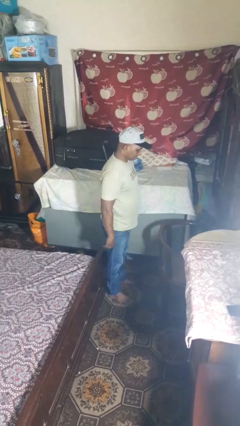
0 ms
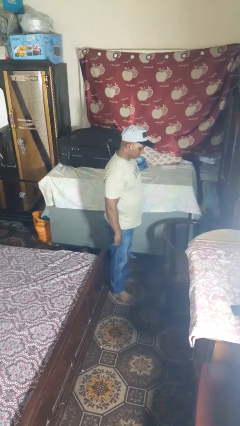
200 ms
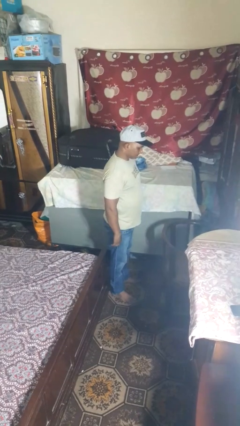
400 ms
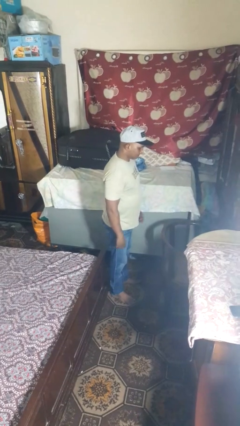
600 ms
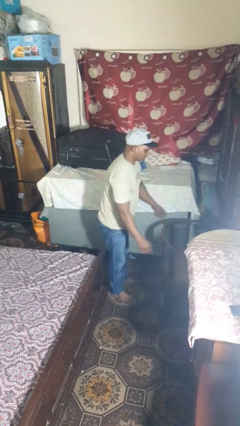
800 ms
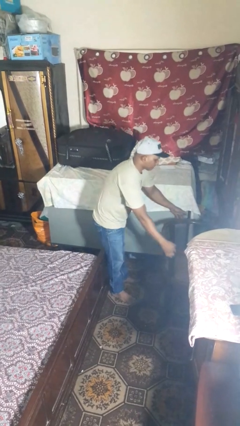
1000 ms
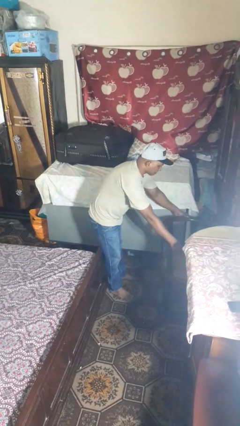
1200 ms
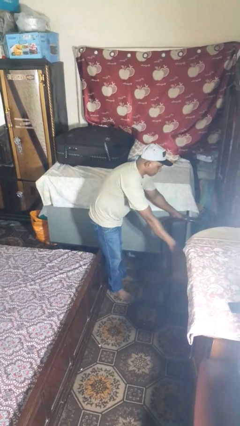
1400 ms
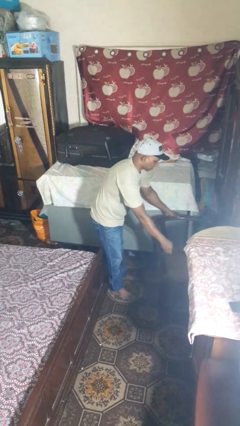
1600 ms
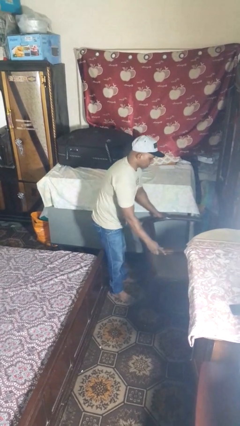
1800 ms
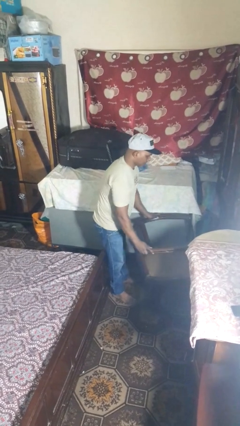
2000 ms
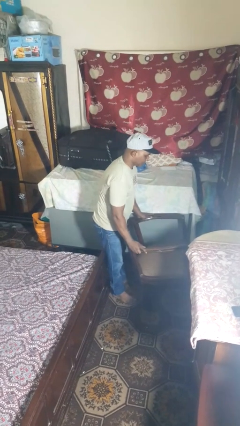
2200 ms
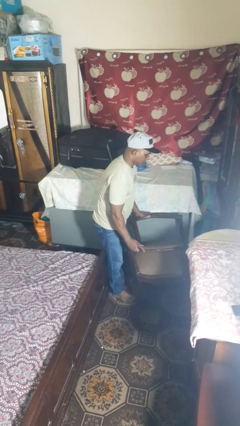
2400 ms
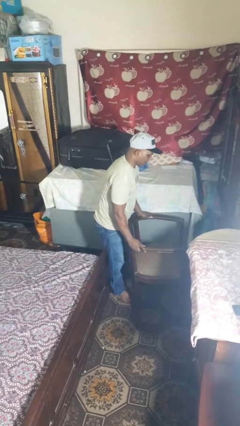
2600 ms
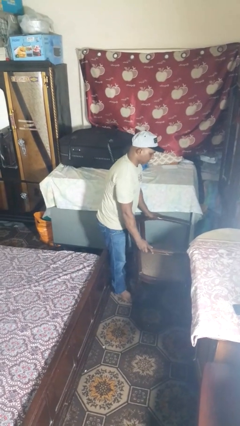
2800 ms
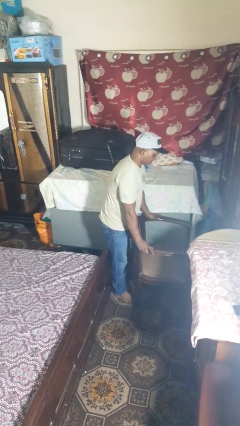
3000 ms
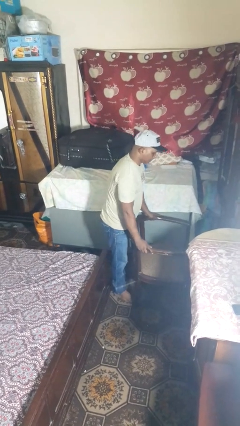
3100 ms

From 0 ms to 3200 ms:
person pulls out chair

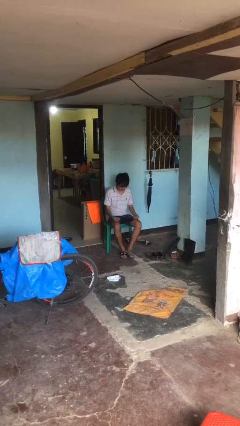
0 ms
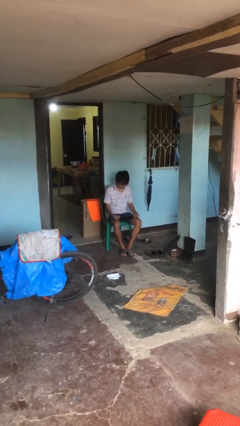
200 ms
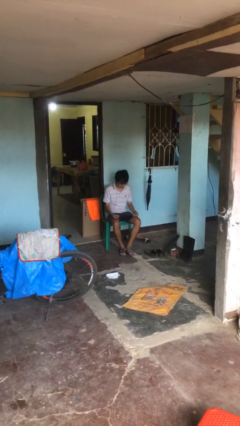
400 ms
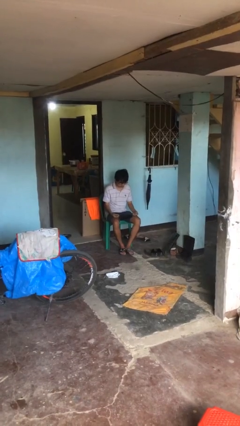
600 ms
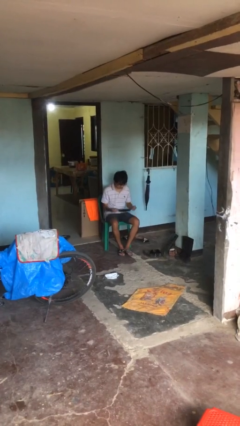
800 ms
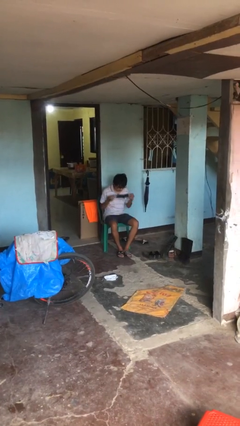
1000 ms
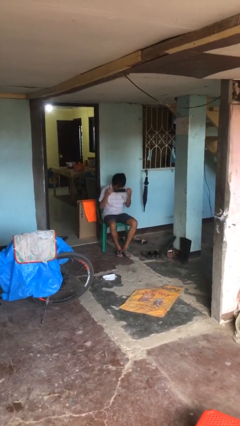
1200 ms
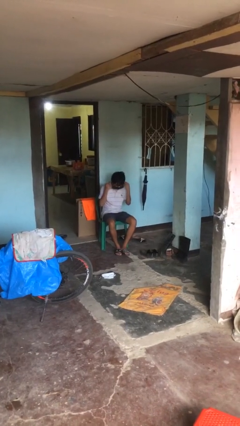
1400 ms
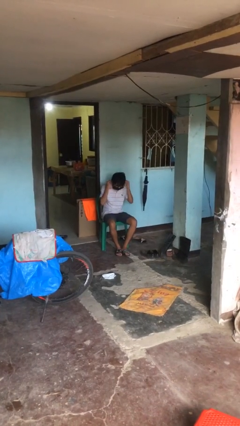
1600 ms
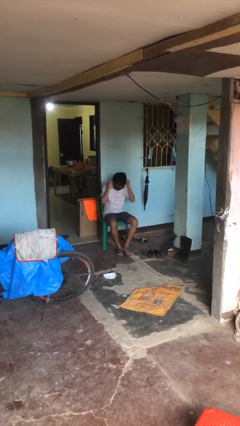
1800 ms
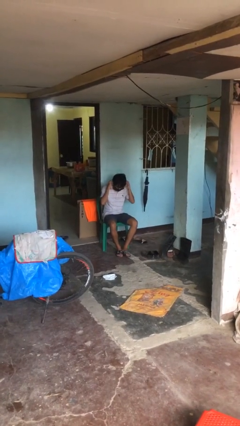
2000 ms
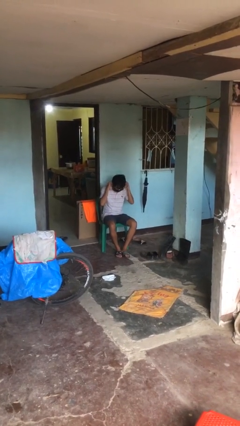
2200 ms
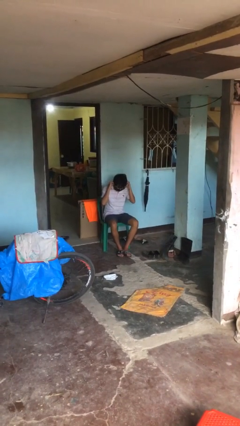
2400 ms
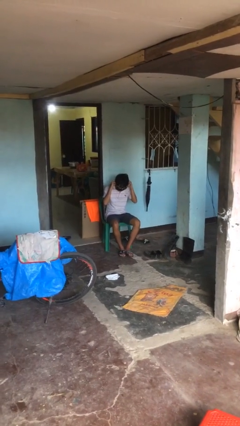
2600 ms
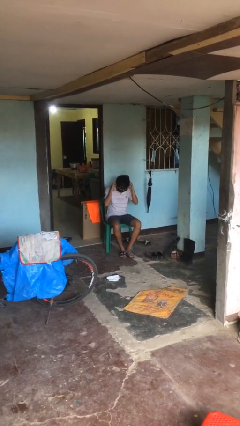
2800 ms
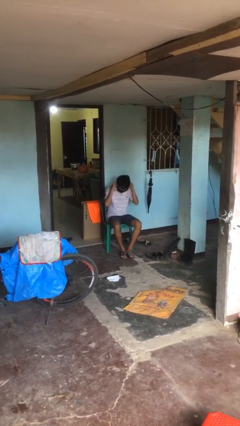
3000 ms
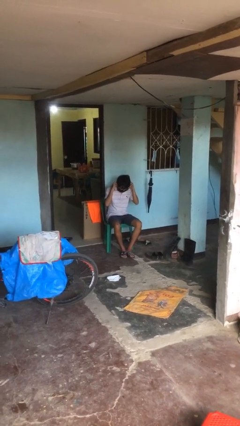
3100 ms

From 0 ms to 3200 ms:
person puts on facemask

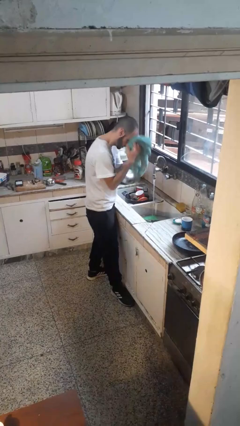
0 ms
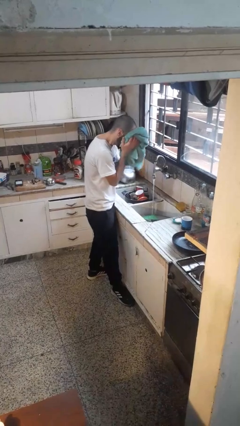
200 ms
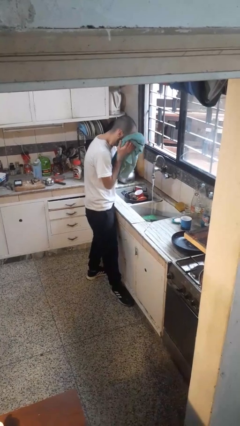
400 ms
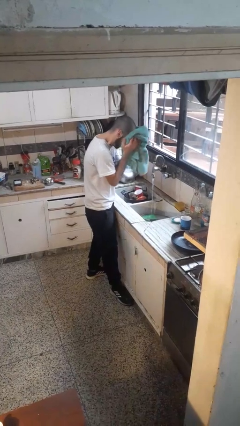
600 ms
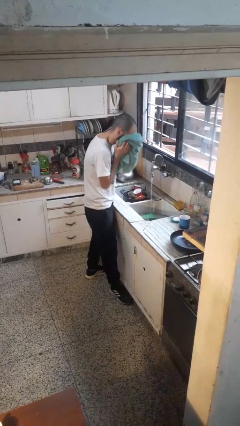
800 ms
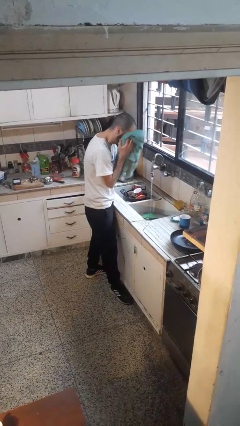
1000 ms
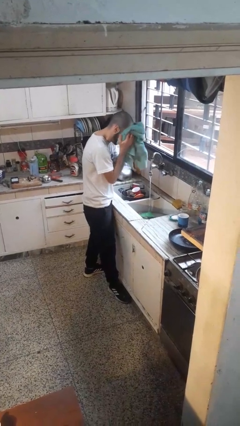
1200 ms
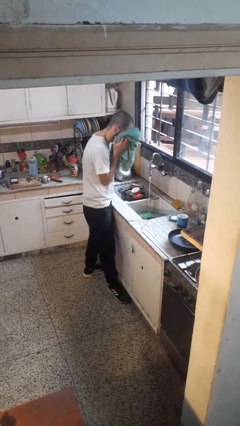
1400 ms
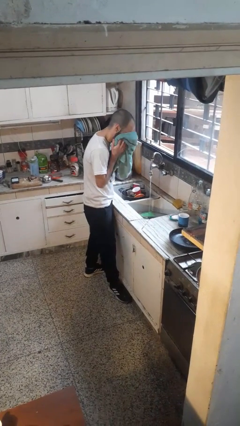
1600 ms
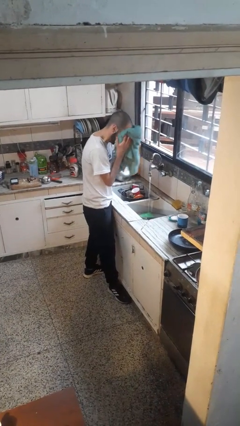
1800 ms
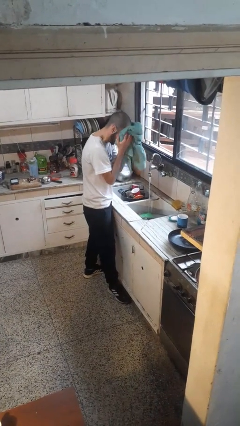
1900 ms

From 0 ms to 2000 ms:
person dries face with towel

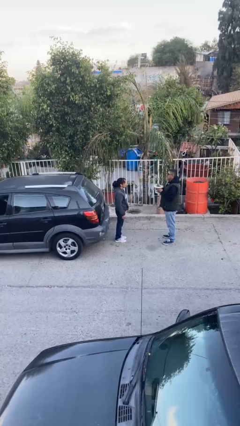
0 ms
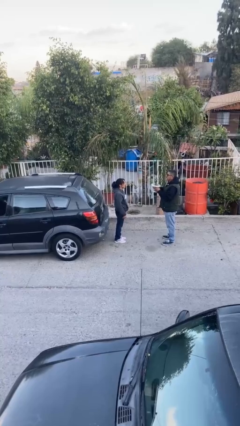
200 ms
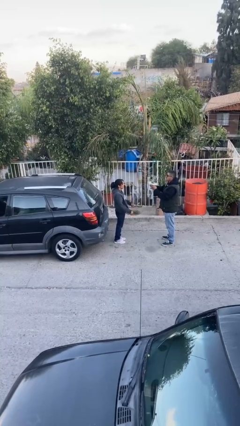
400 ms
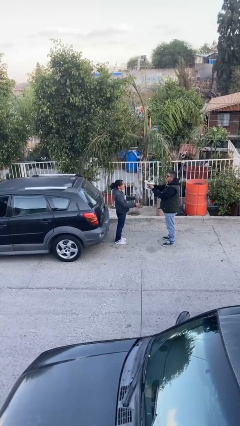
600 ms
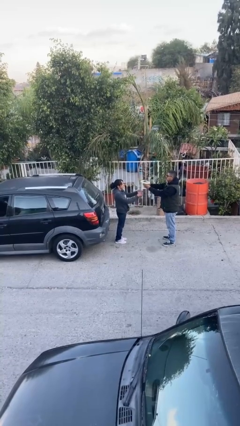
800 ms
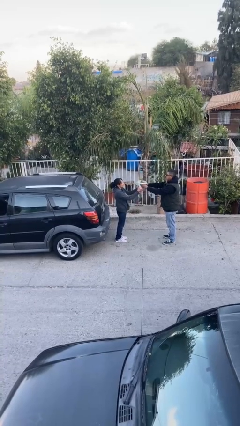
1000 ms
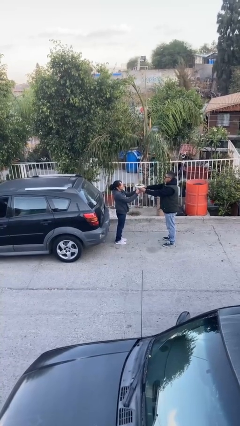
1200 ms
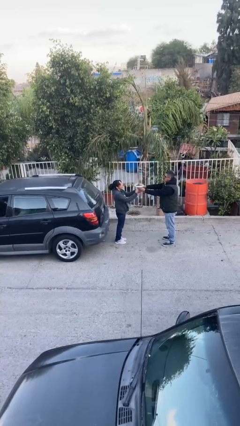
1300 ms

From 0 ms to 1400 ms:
person transfers object to person

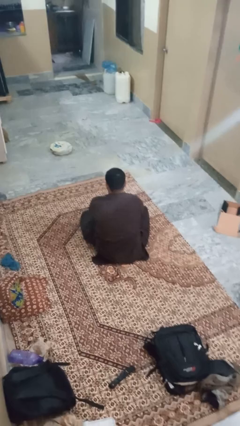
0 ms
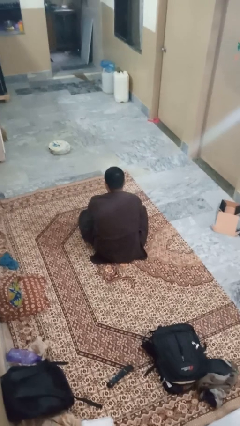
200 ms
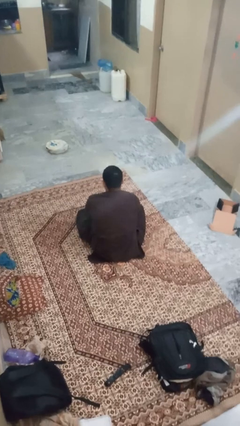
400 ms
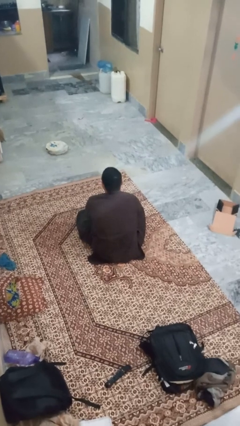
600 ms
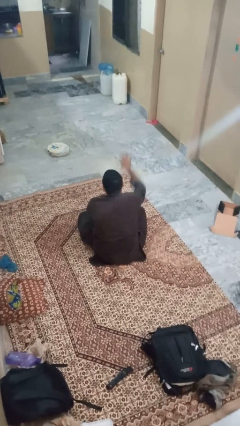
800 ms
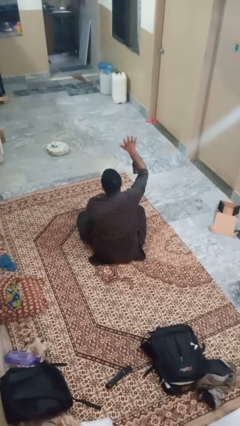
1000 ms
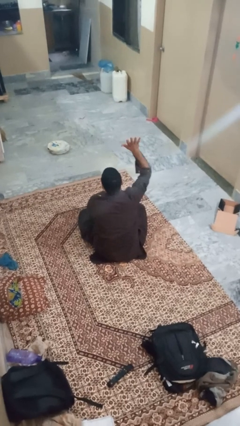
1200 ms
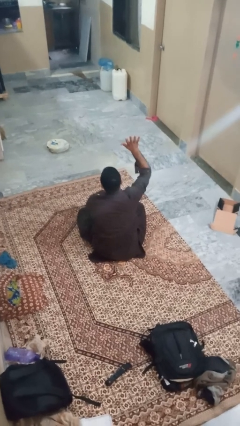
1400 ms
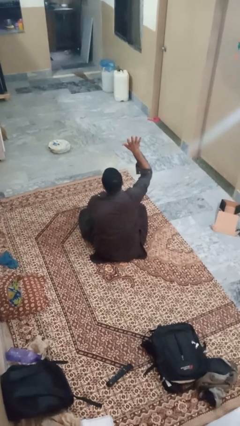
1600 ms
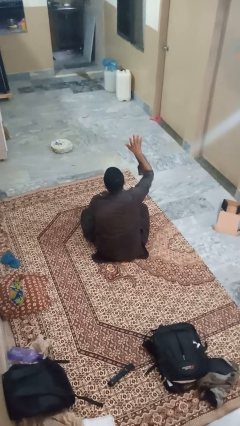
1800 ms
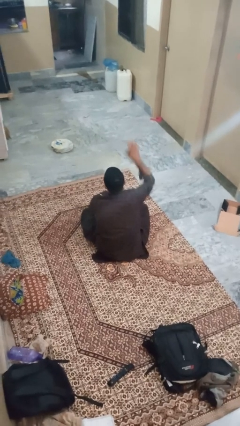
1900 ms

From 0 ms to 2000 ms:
person gestures number five

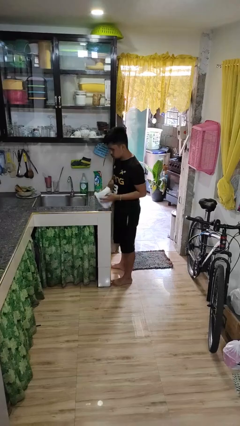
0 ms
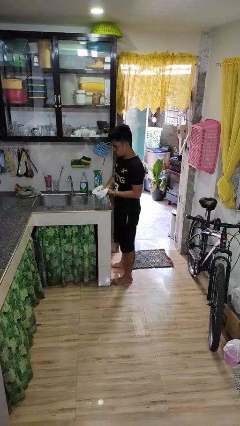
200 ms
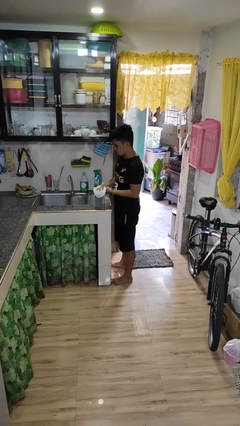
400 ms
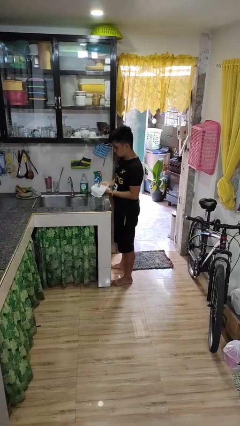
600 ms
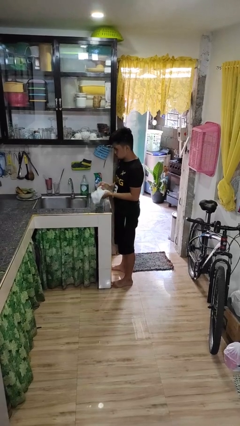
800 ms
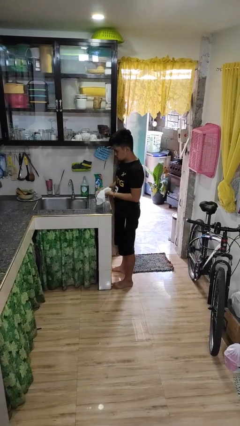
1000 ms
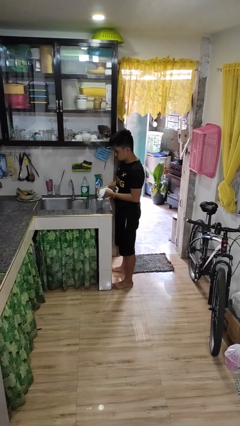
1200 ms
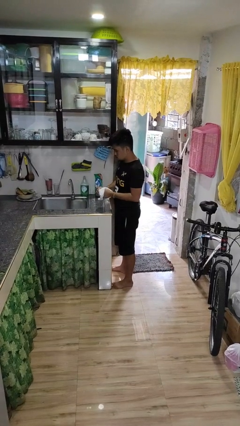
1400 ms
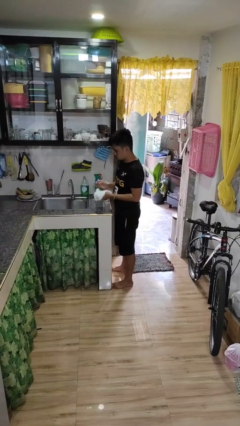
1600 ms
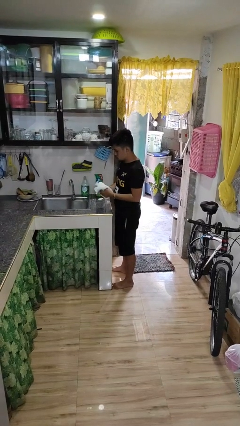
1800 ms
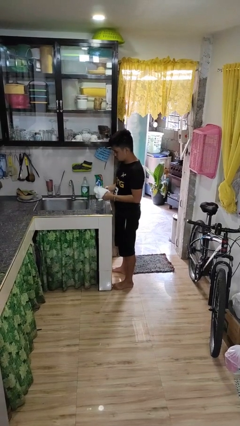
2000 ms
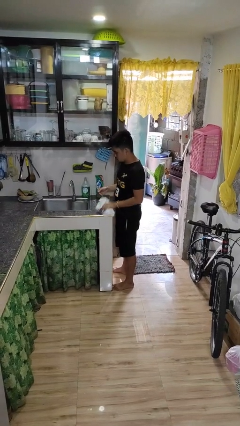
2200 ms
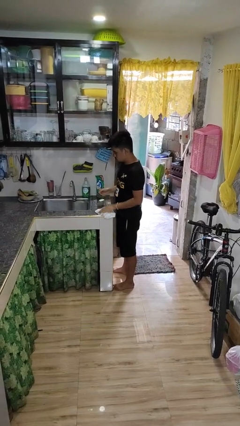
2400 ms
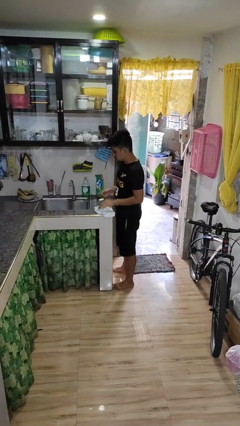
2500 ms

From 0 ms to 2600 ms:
person dries hands with towel

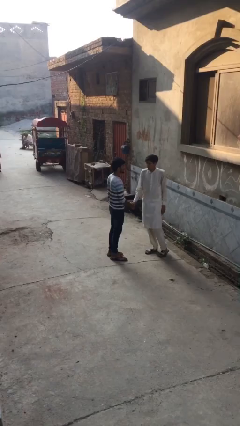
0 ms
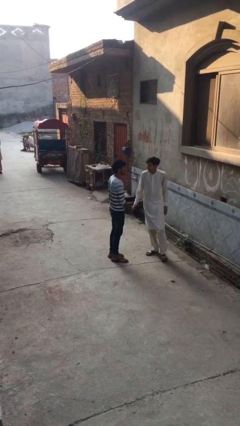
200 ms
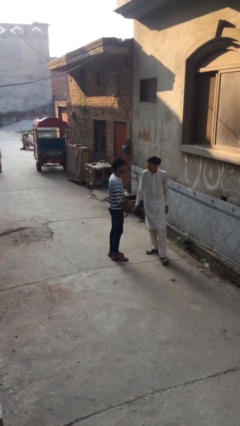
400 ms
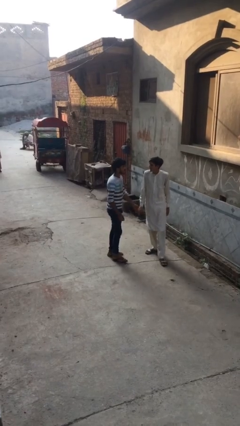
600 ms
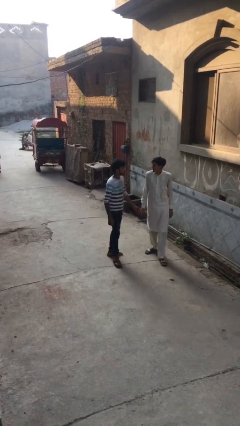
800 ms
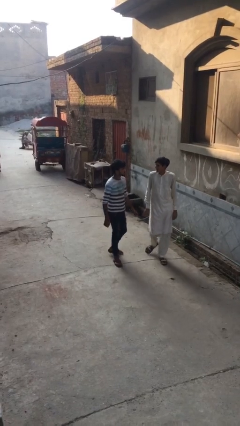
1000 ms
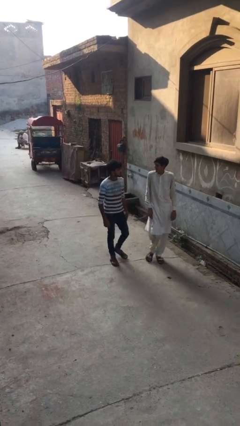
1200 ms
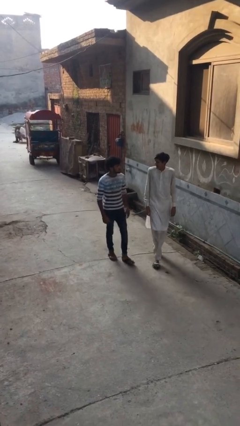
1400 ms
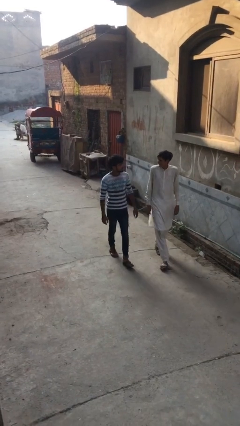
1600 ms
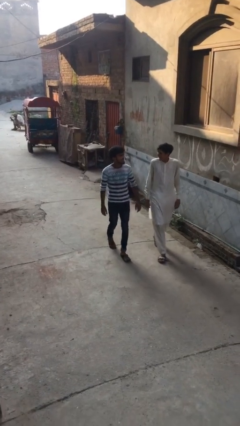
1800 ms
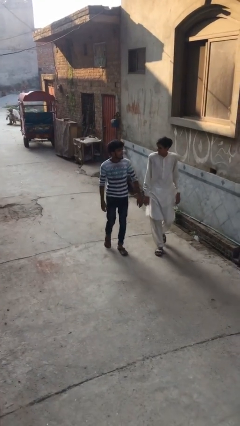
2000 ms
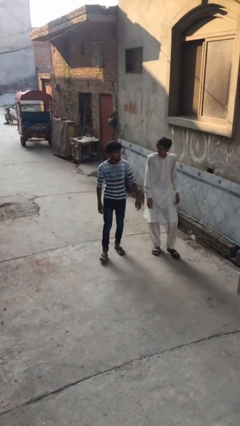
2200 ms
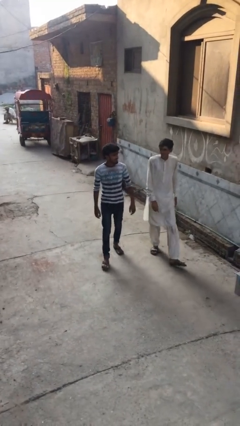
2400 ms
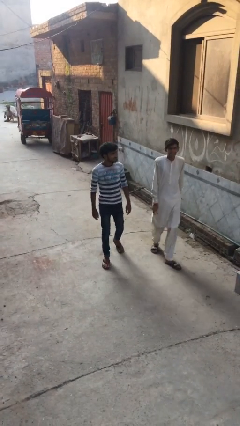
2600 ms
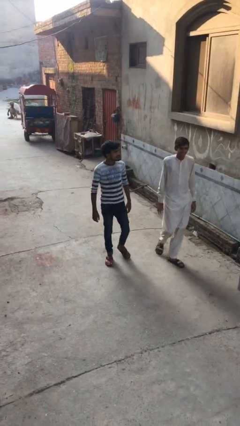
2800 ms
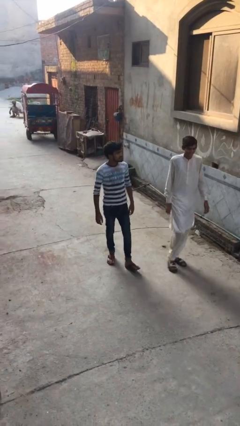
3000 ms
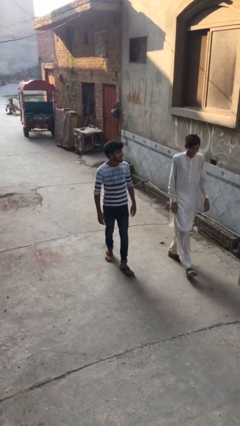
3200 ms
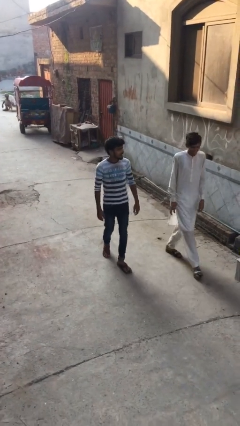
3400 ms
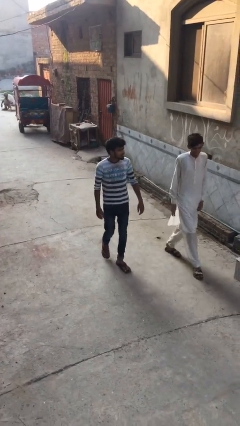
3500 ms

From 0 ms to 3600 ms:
person talks to person
